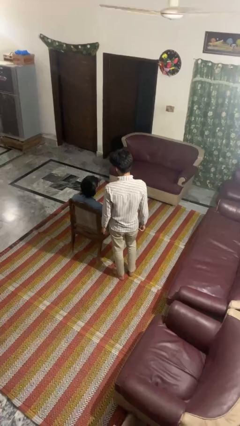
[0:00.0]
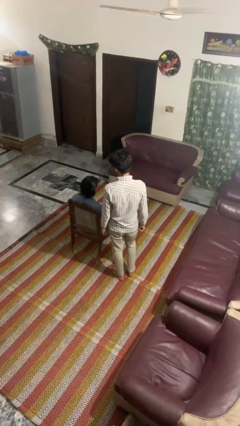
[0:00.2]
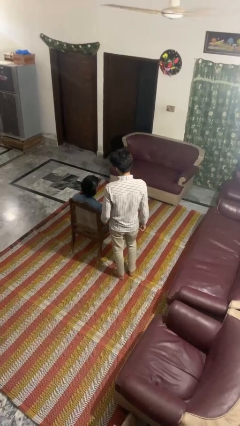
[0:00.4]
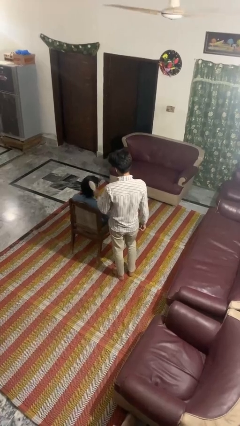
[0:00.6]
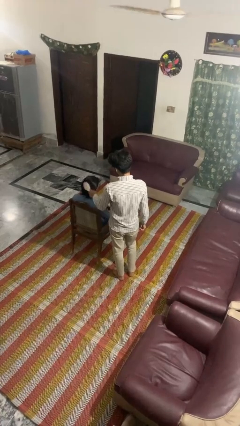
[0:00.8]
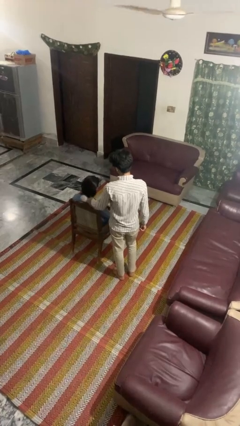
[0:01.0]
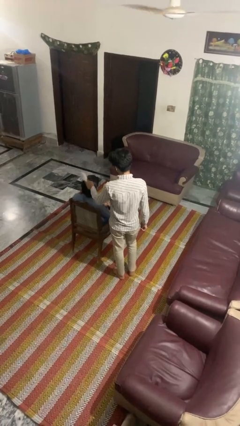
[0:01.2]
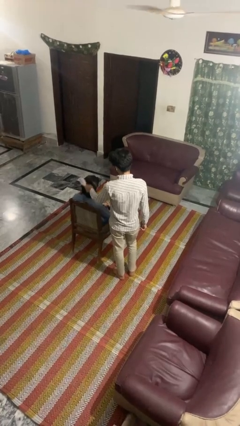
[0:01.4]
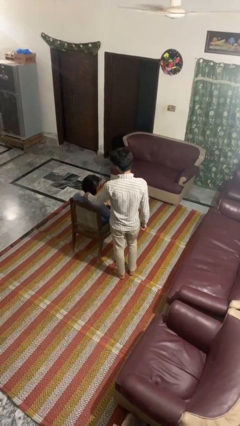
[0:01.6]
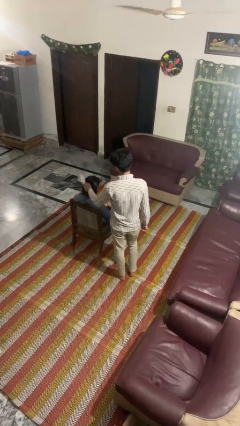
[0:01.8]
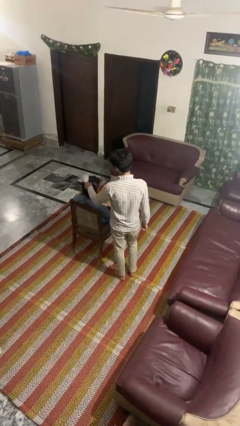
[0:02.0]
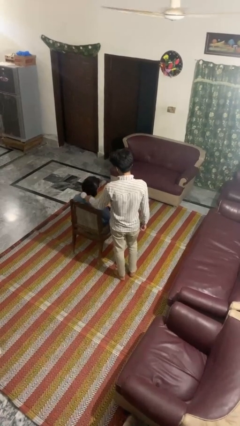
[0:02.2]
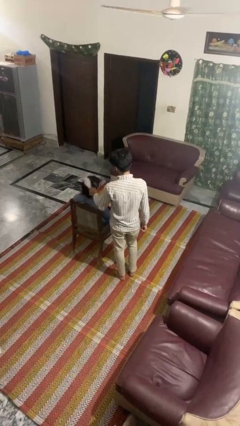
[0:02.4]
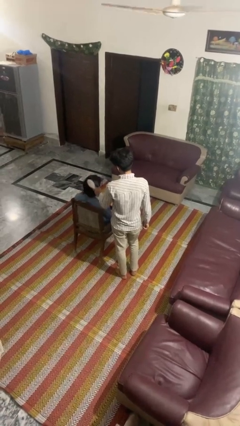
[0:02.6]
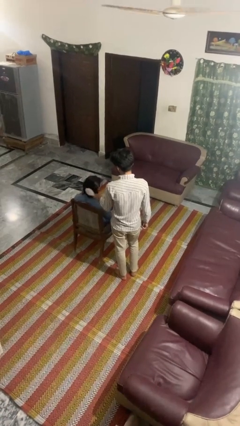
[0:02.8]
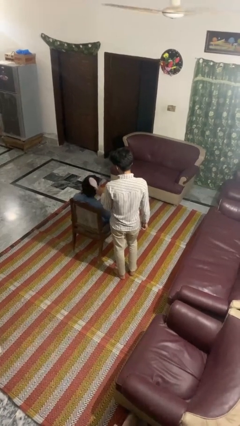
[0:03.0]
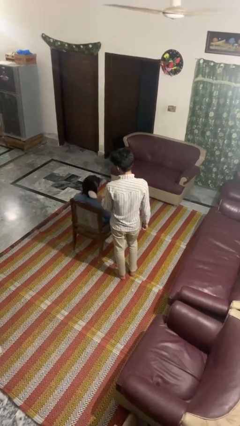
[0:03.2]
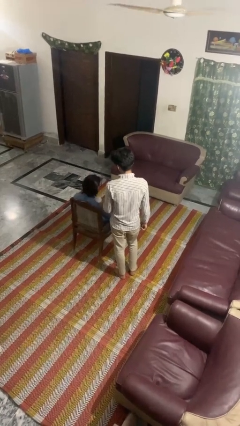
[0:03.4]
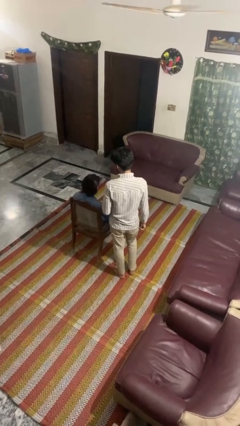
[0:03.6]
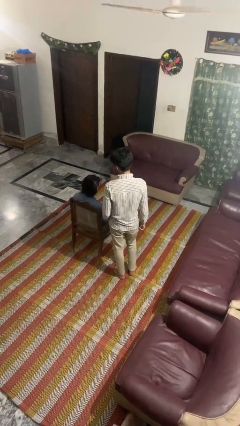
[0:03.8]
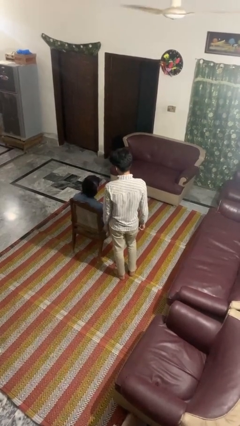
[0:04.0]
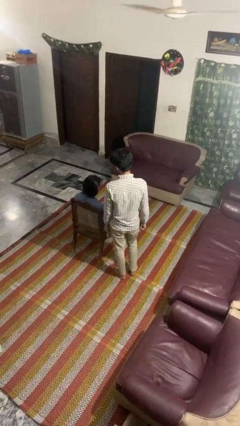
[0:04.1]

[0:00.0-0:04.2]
person brushes hair of person

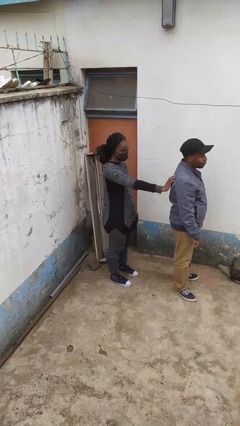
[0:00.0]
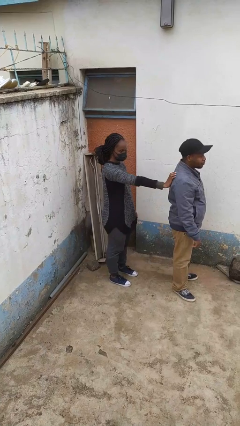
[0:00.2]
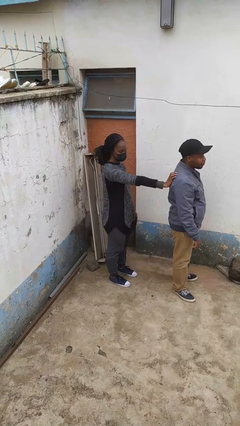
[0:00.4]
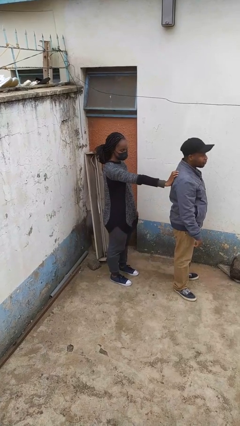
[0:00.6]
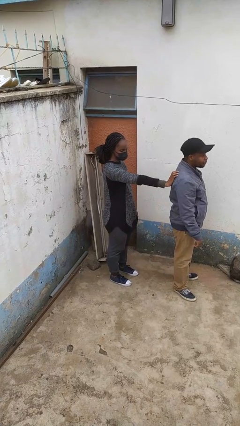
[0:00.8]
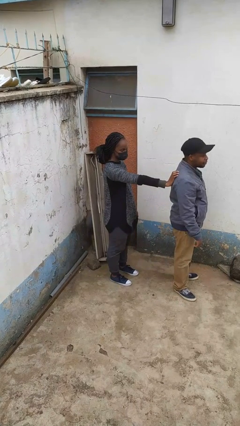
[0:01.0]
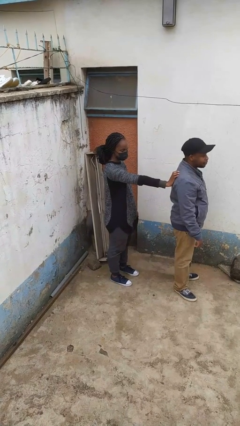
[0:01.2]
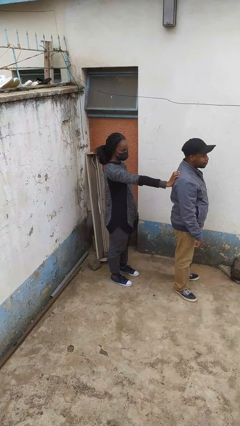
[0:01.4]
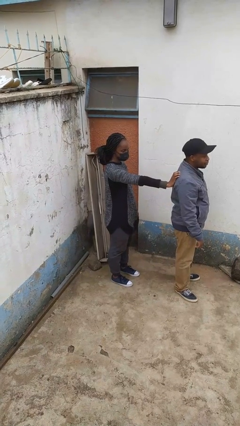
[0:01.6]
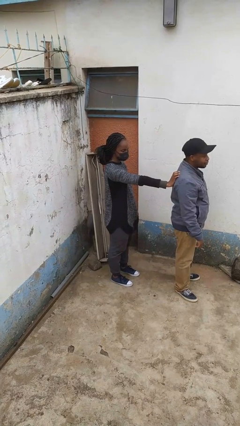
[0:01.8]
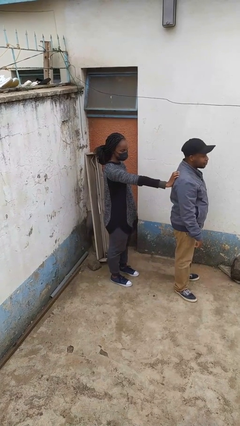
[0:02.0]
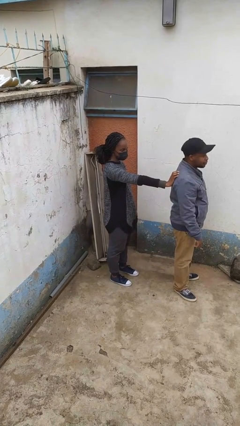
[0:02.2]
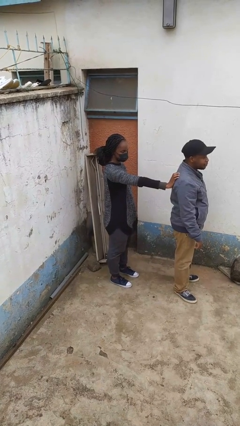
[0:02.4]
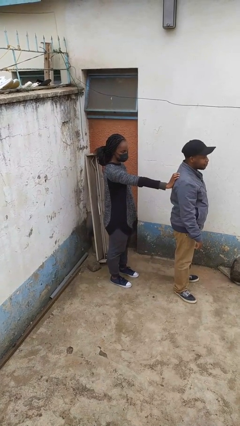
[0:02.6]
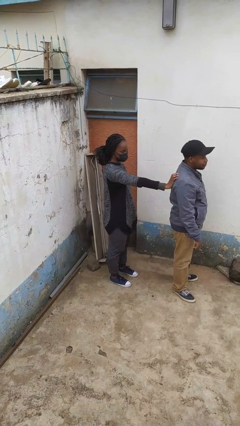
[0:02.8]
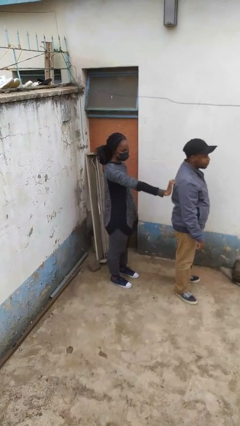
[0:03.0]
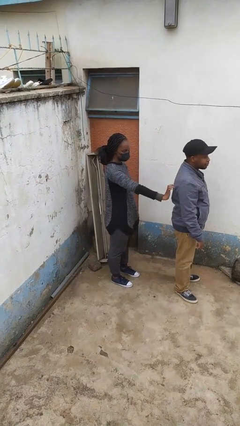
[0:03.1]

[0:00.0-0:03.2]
person touches back of person

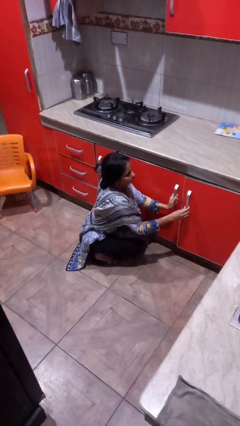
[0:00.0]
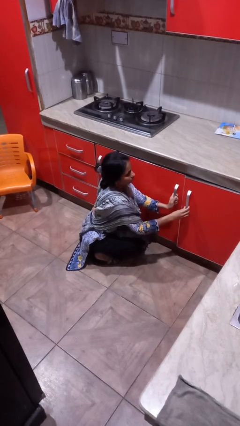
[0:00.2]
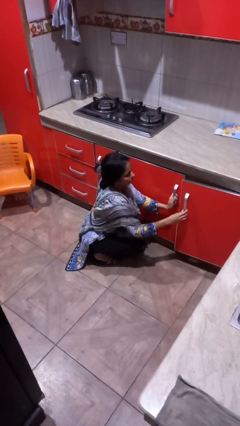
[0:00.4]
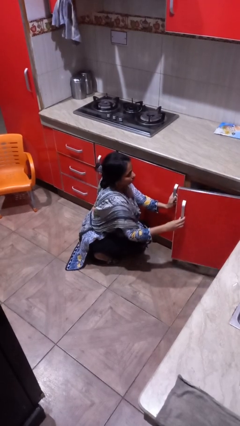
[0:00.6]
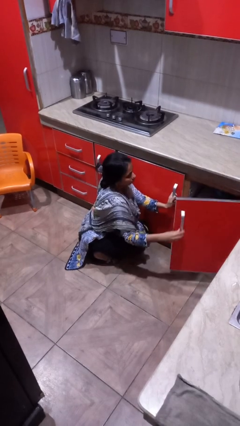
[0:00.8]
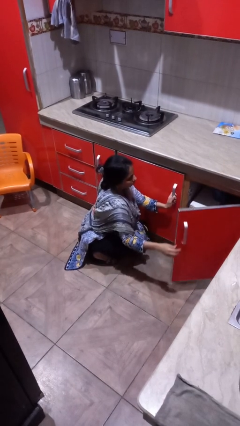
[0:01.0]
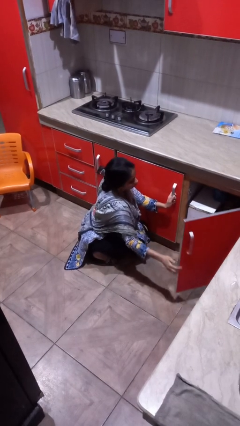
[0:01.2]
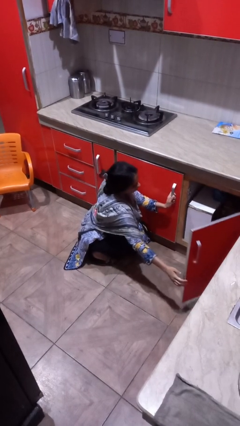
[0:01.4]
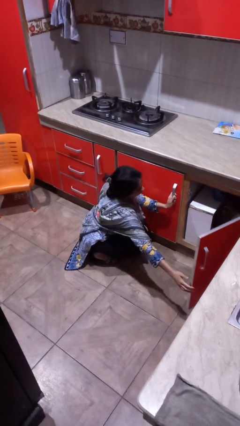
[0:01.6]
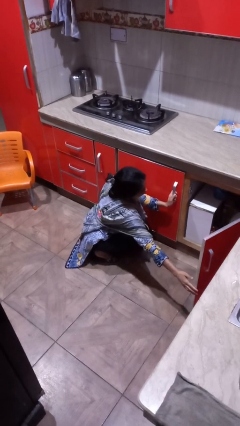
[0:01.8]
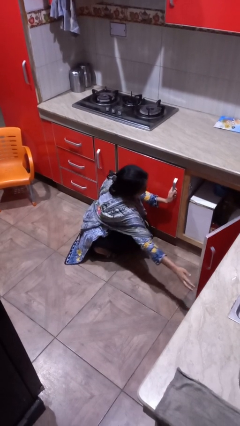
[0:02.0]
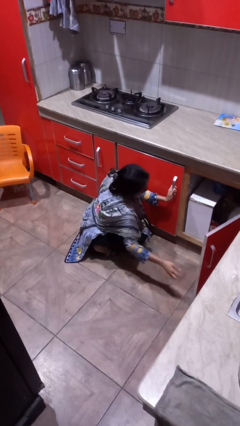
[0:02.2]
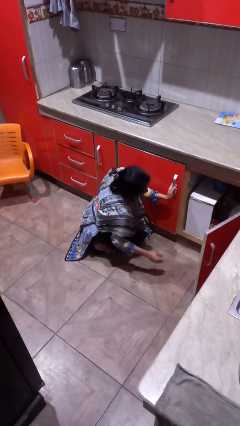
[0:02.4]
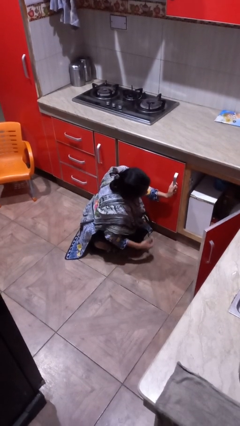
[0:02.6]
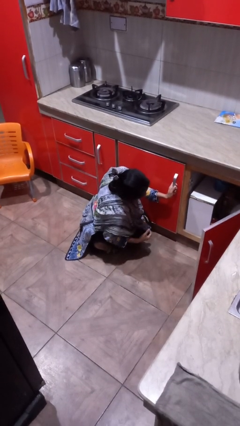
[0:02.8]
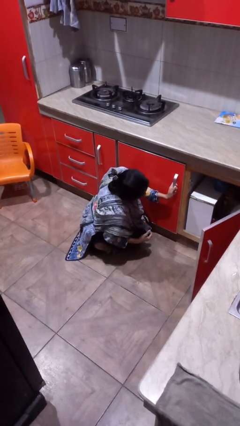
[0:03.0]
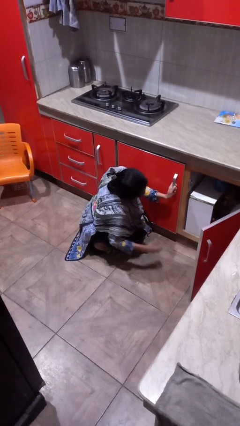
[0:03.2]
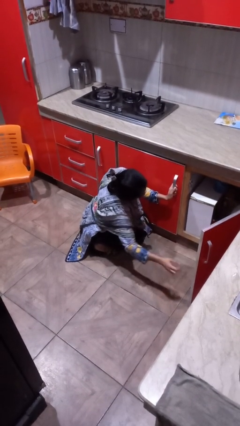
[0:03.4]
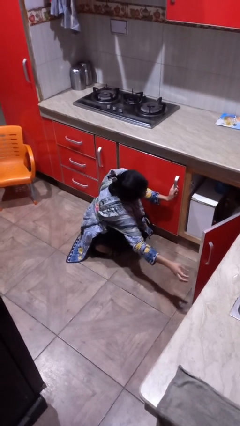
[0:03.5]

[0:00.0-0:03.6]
person opens cabinet

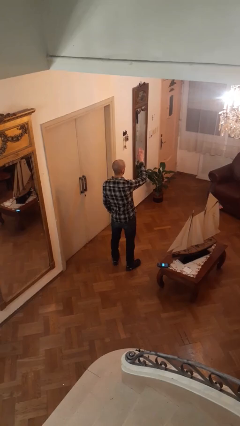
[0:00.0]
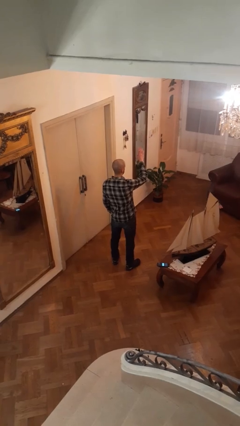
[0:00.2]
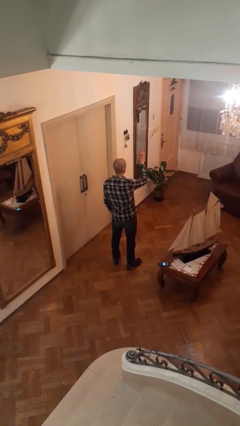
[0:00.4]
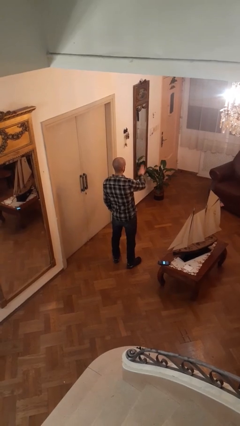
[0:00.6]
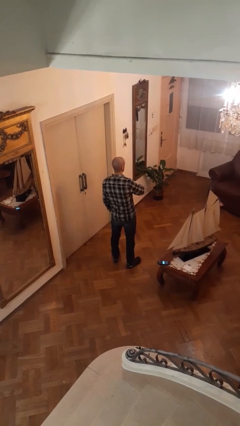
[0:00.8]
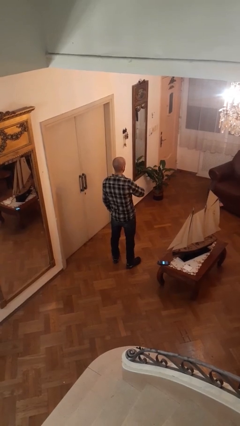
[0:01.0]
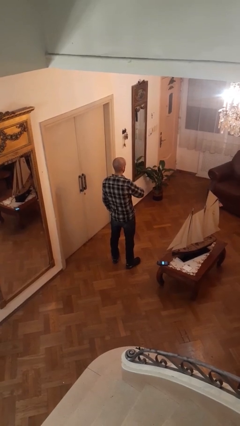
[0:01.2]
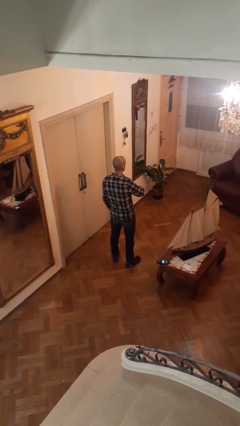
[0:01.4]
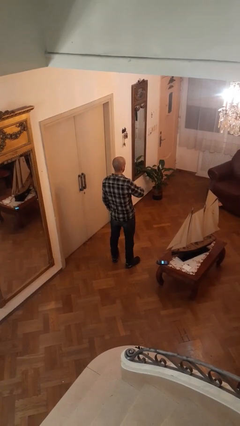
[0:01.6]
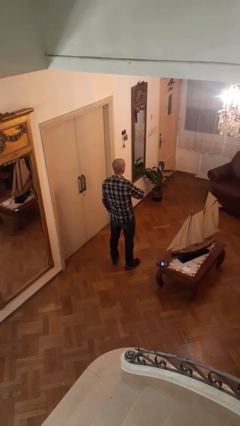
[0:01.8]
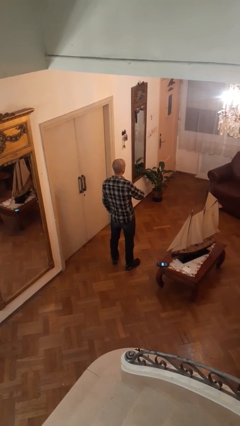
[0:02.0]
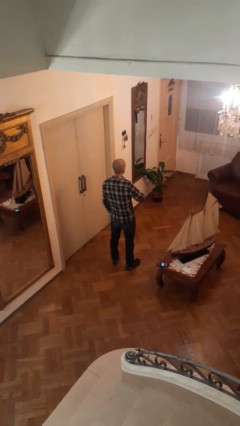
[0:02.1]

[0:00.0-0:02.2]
person gestures swipe down

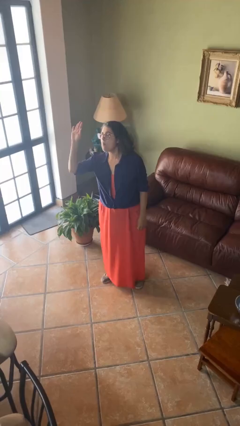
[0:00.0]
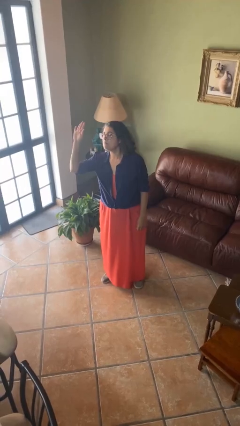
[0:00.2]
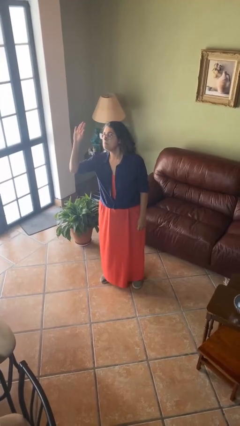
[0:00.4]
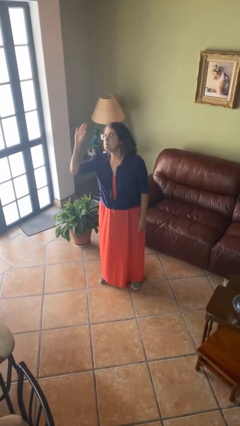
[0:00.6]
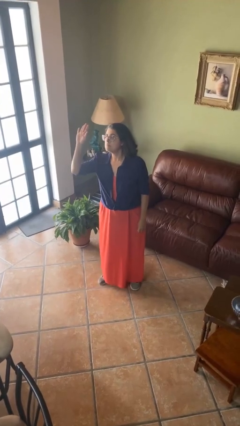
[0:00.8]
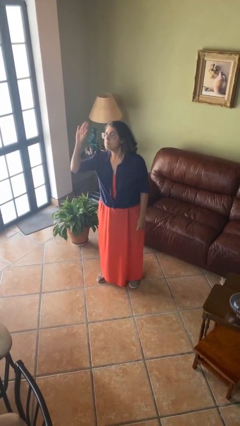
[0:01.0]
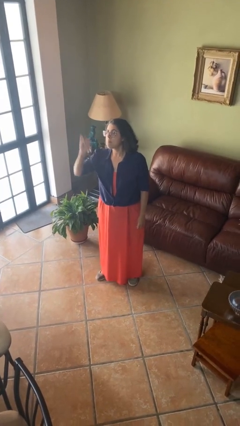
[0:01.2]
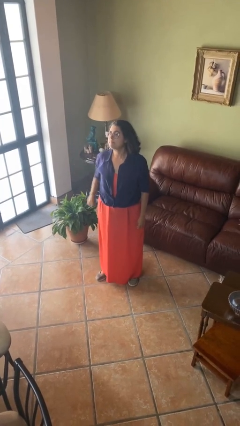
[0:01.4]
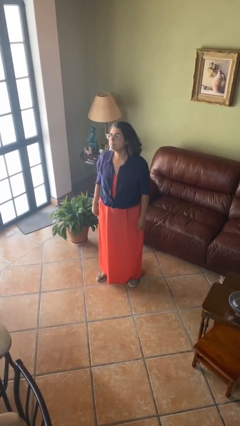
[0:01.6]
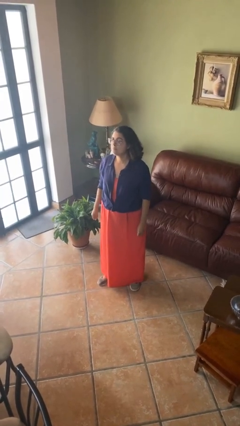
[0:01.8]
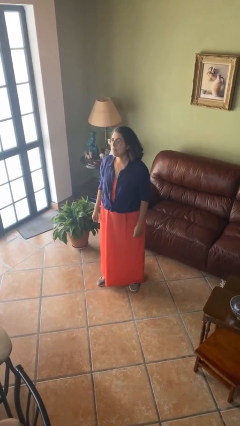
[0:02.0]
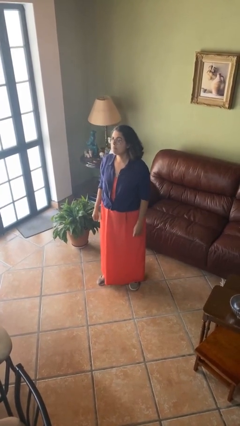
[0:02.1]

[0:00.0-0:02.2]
person gestures lower hand

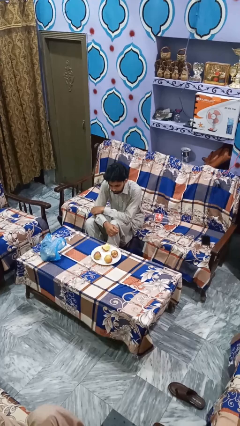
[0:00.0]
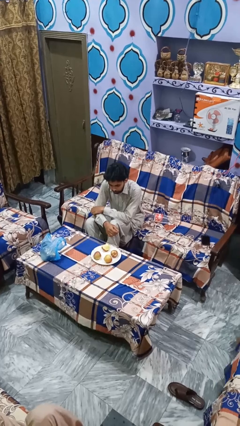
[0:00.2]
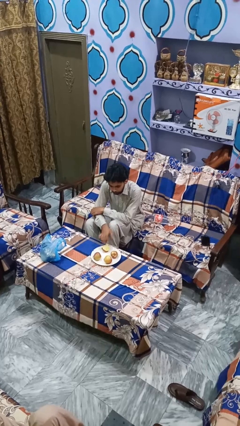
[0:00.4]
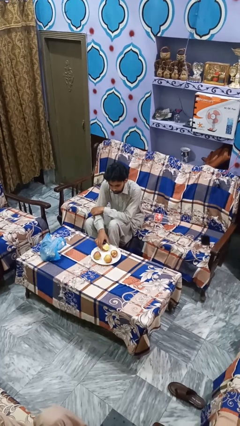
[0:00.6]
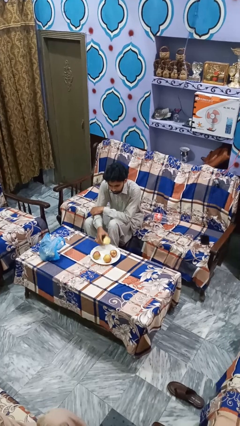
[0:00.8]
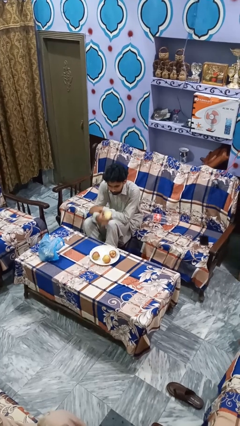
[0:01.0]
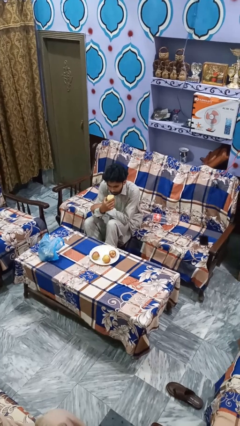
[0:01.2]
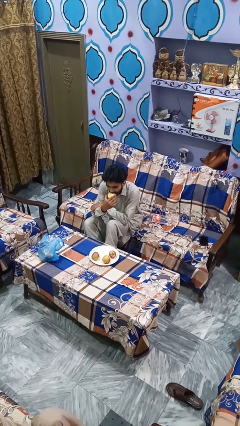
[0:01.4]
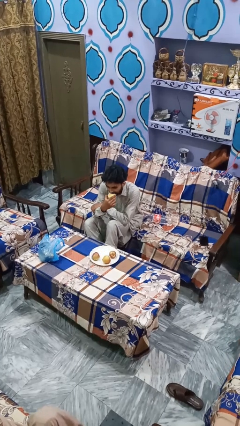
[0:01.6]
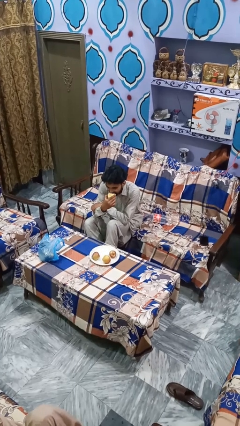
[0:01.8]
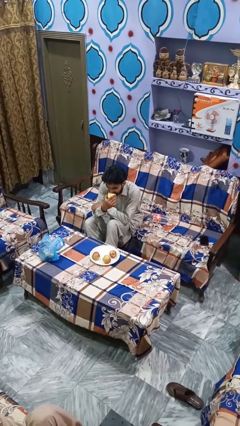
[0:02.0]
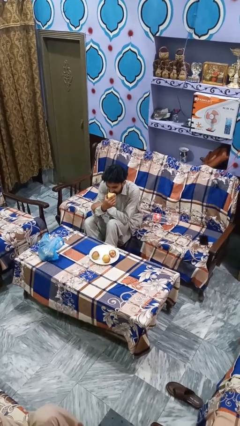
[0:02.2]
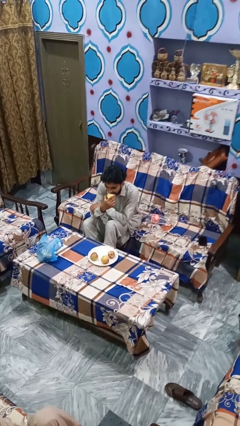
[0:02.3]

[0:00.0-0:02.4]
person eats apple
